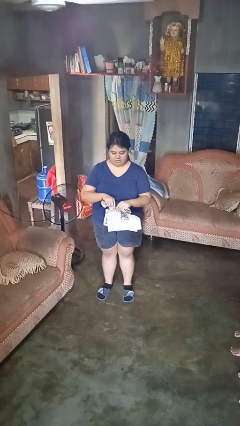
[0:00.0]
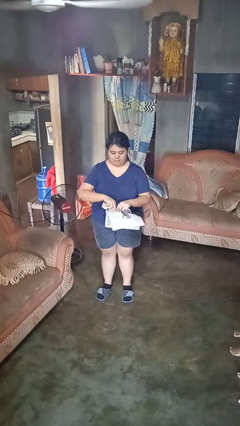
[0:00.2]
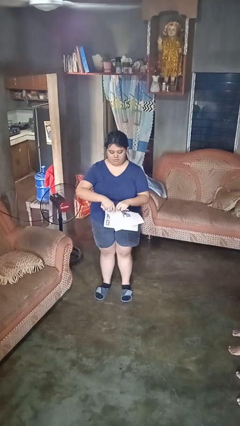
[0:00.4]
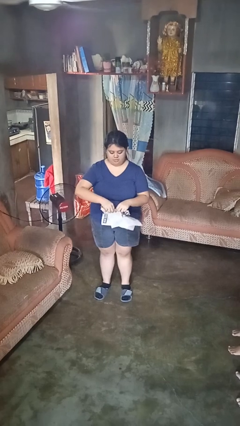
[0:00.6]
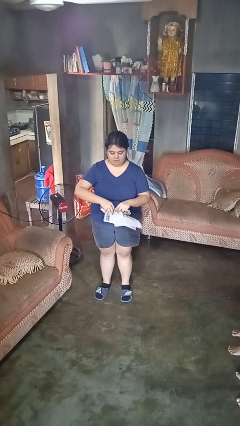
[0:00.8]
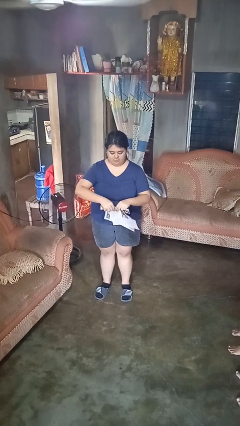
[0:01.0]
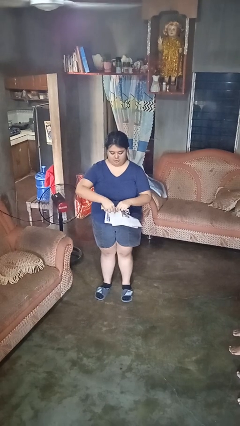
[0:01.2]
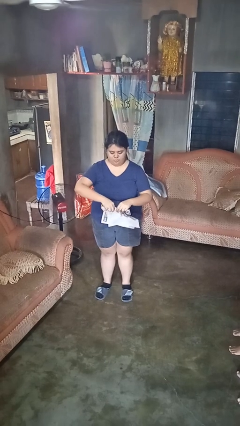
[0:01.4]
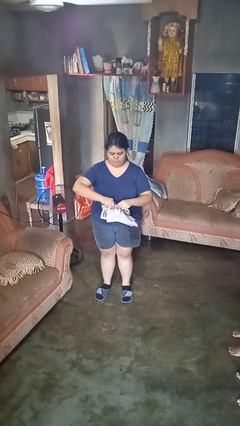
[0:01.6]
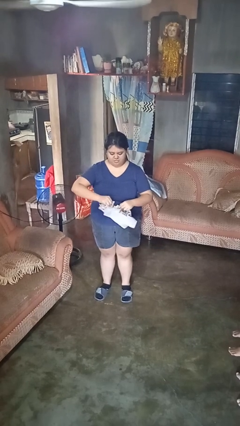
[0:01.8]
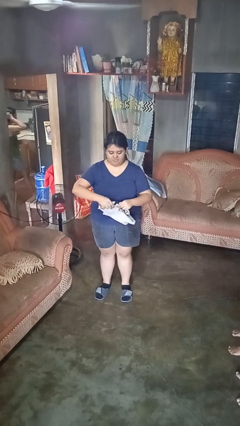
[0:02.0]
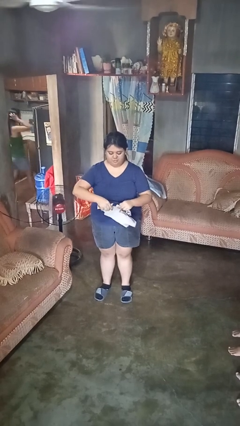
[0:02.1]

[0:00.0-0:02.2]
person tears paper

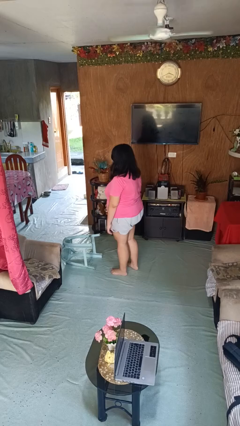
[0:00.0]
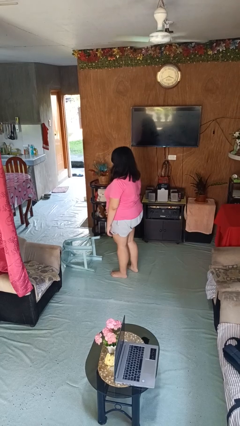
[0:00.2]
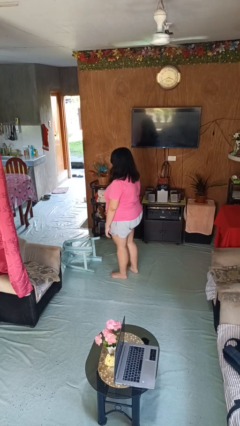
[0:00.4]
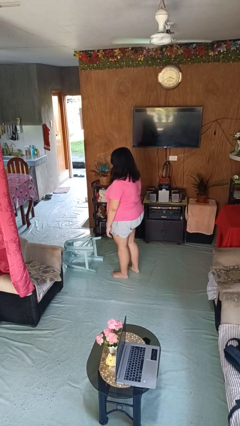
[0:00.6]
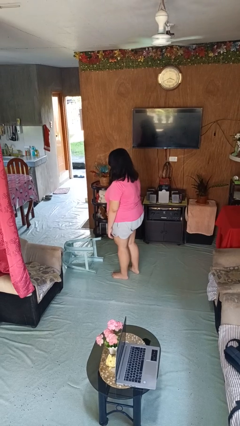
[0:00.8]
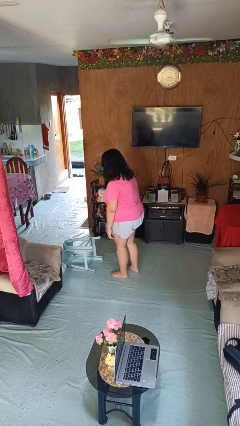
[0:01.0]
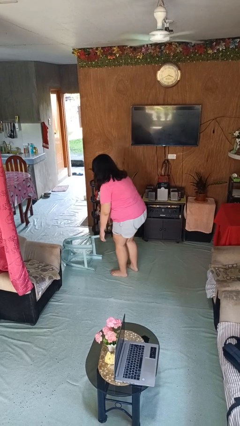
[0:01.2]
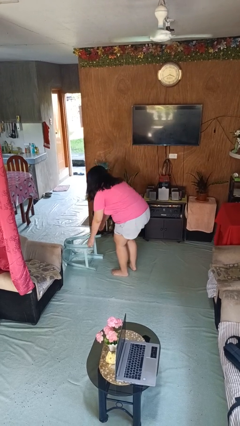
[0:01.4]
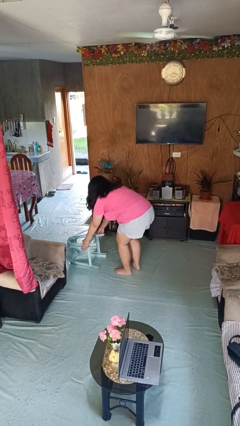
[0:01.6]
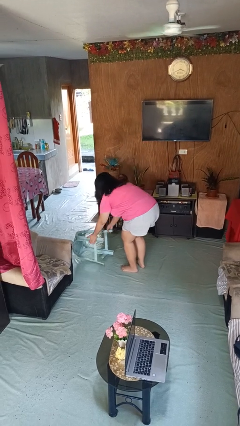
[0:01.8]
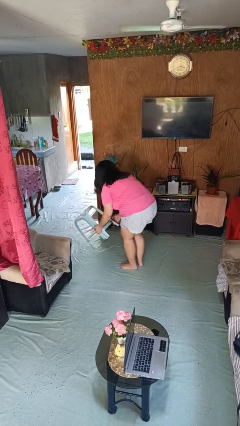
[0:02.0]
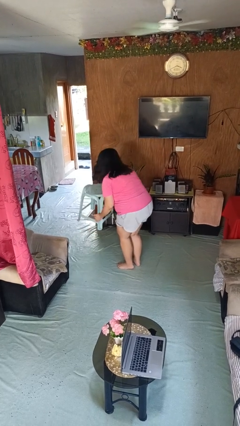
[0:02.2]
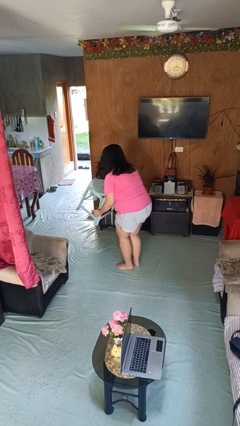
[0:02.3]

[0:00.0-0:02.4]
person sets upright furniture

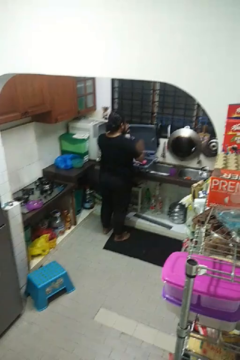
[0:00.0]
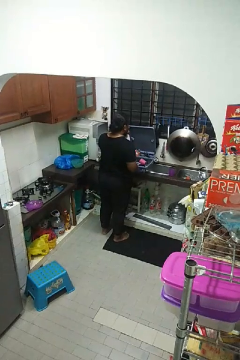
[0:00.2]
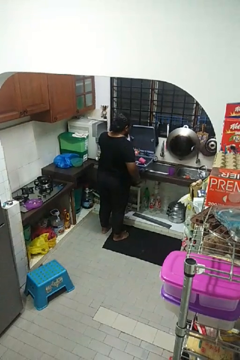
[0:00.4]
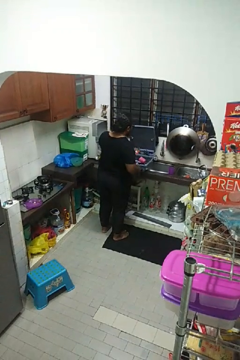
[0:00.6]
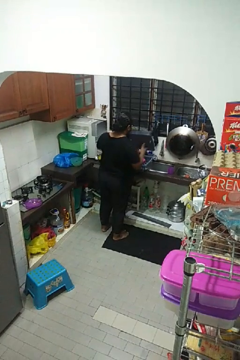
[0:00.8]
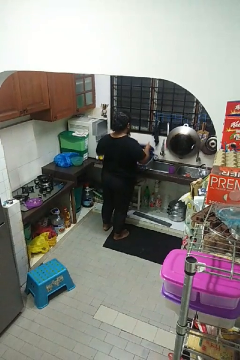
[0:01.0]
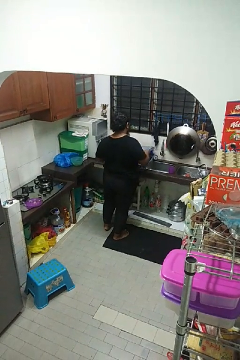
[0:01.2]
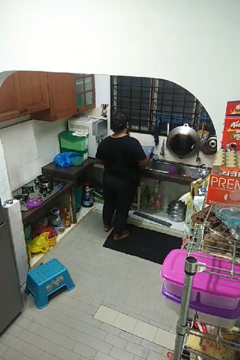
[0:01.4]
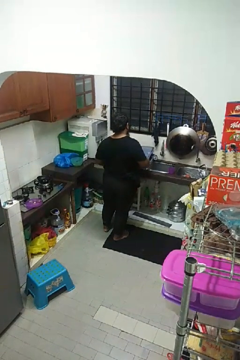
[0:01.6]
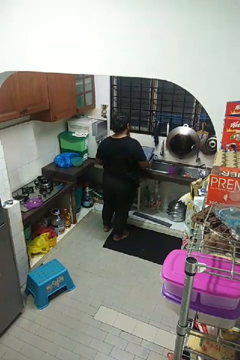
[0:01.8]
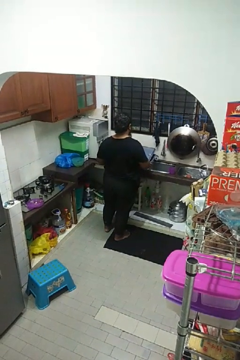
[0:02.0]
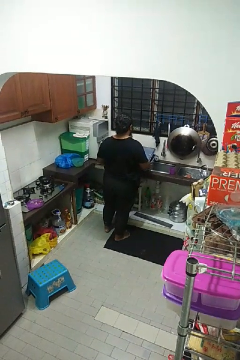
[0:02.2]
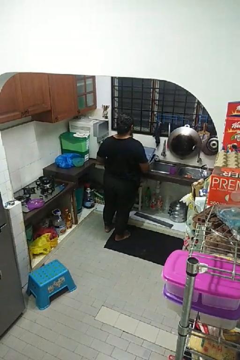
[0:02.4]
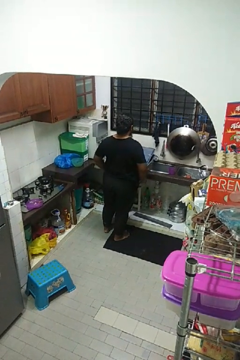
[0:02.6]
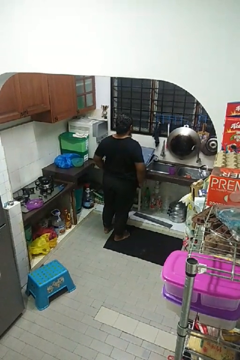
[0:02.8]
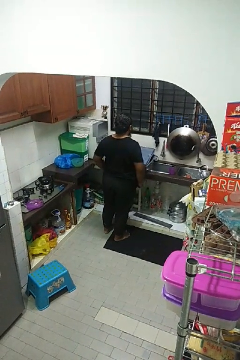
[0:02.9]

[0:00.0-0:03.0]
person closes dishwasher

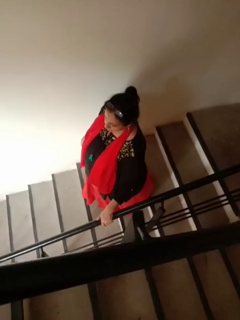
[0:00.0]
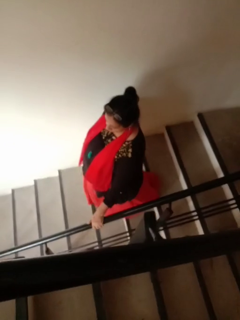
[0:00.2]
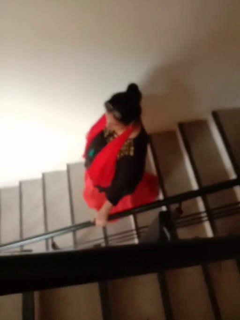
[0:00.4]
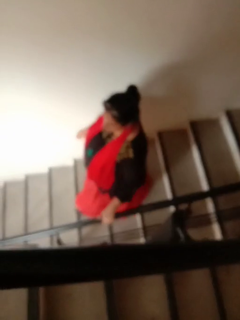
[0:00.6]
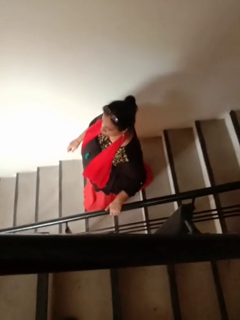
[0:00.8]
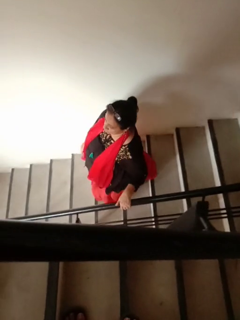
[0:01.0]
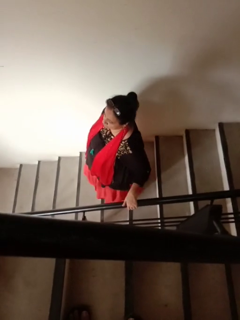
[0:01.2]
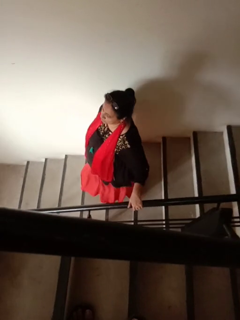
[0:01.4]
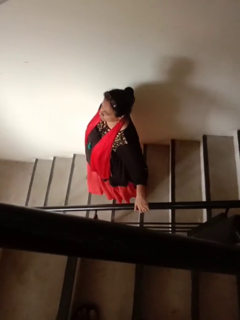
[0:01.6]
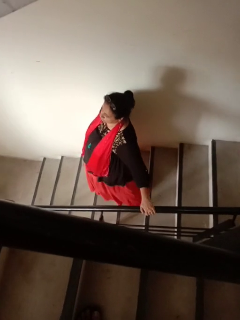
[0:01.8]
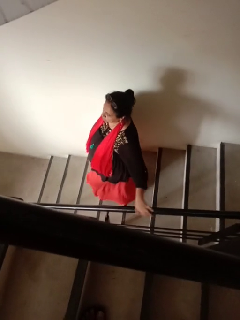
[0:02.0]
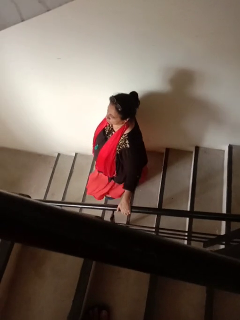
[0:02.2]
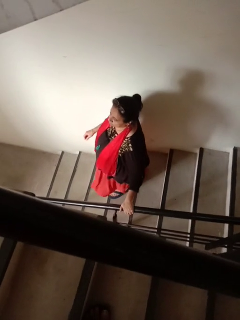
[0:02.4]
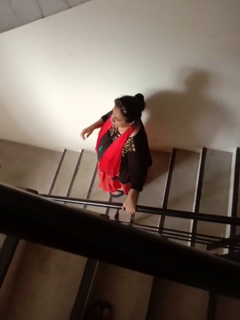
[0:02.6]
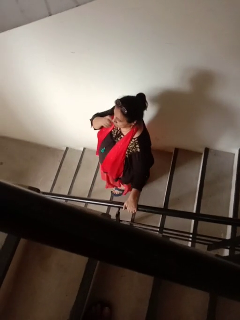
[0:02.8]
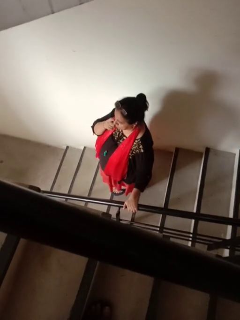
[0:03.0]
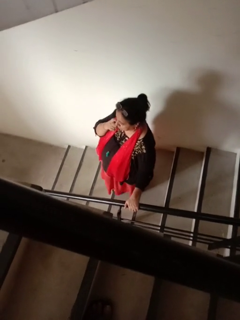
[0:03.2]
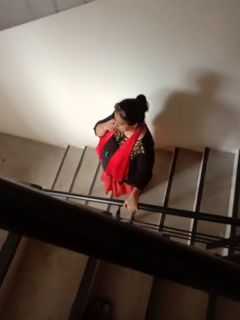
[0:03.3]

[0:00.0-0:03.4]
person climbs down stairs

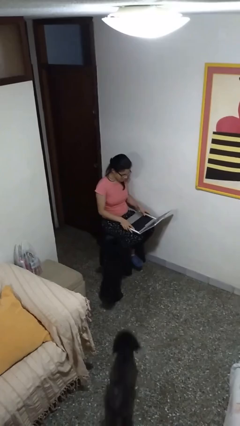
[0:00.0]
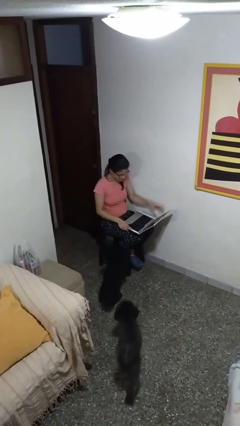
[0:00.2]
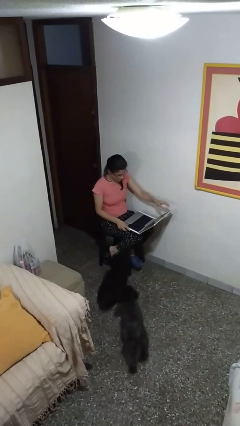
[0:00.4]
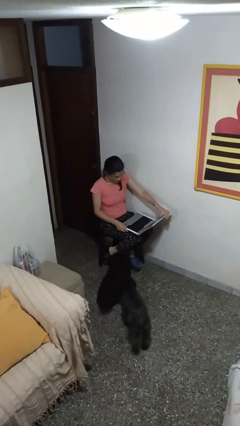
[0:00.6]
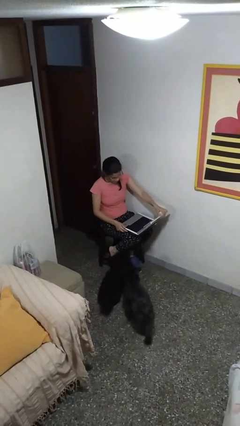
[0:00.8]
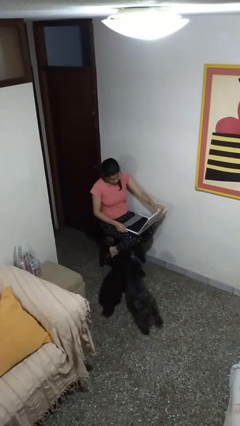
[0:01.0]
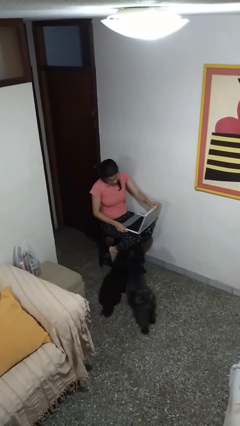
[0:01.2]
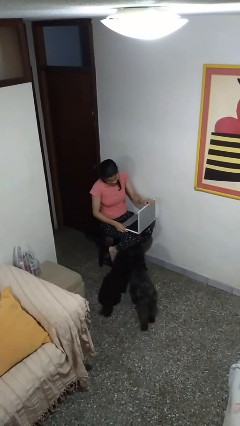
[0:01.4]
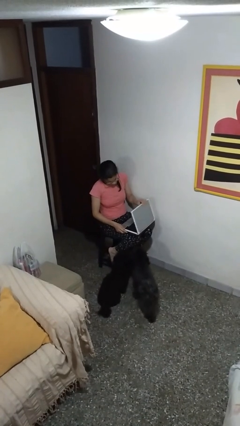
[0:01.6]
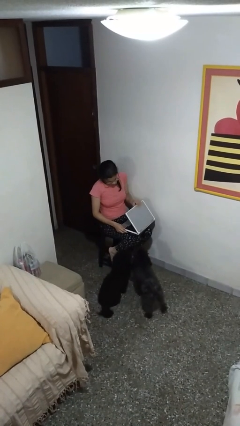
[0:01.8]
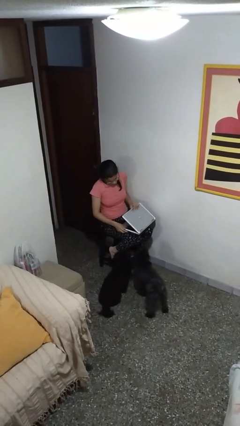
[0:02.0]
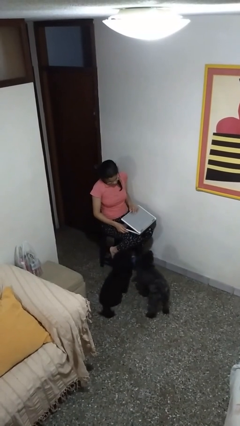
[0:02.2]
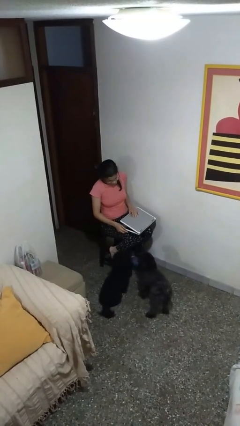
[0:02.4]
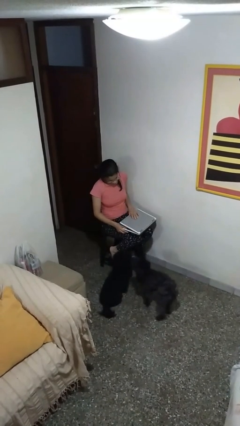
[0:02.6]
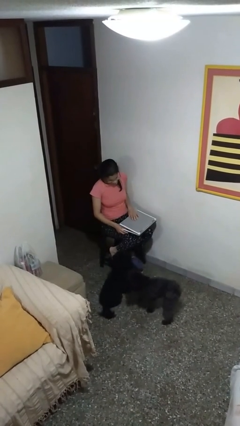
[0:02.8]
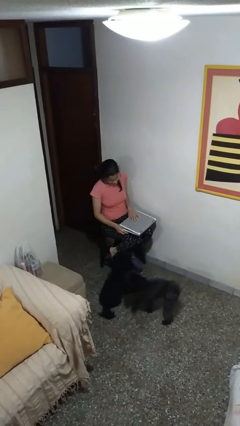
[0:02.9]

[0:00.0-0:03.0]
person closes laptop

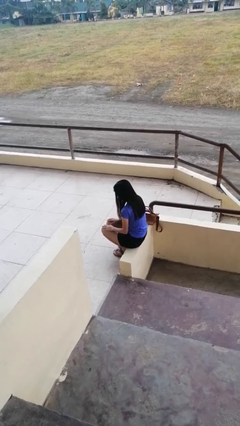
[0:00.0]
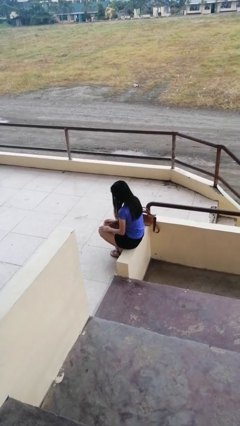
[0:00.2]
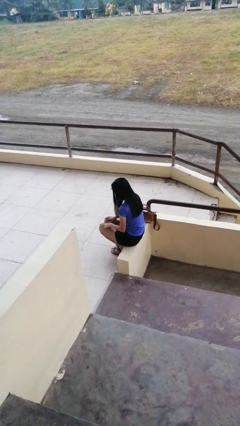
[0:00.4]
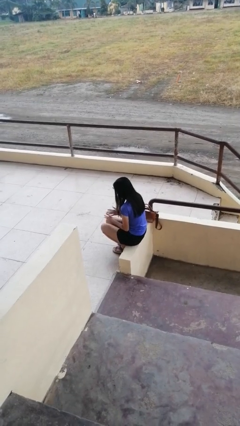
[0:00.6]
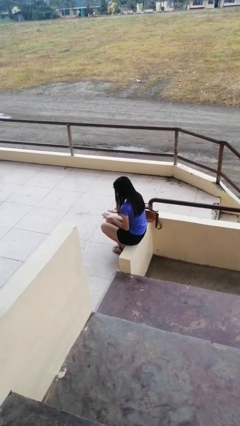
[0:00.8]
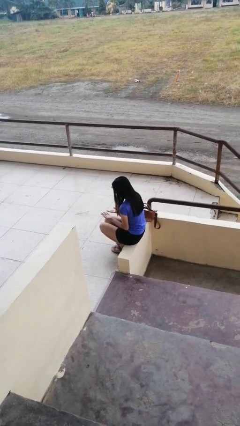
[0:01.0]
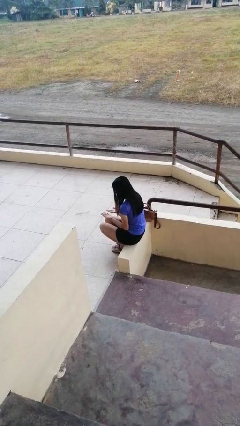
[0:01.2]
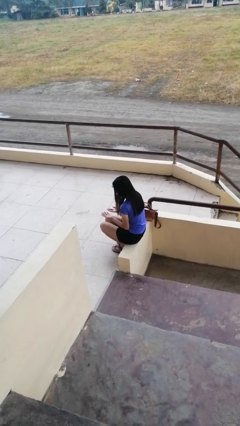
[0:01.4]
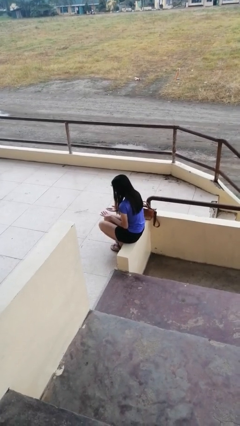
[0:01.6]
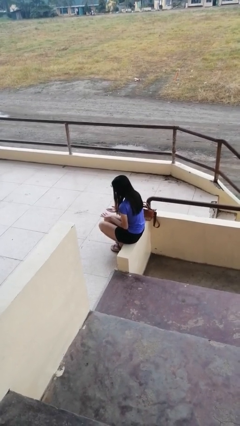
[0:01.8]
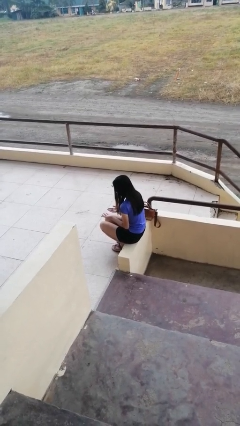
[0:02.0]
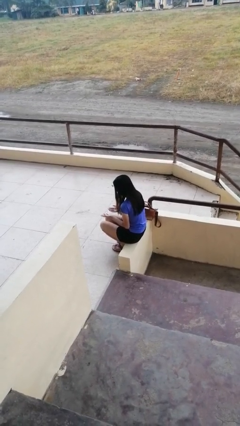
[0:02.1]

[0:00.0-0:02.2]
person looks at hands in lap

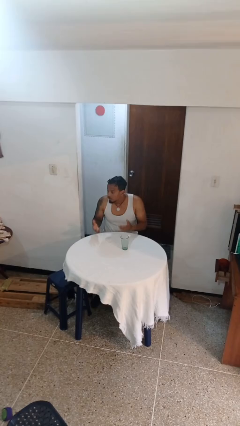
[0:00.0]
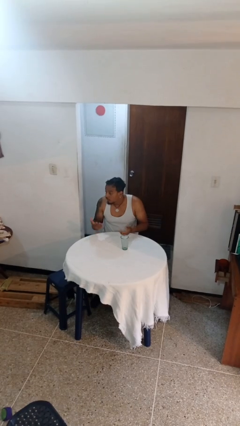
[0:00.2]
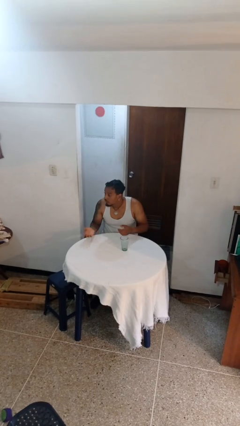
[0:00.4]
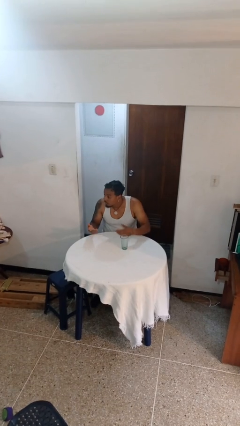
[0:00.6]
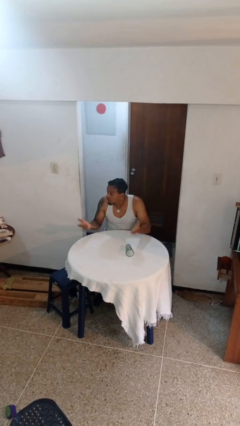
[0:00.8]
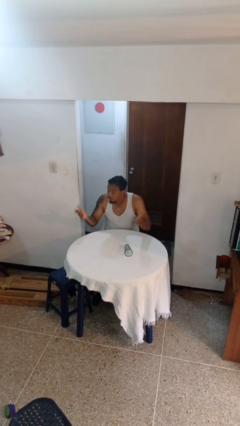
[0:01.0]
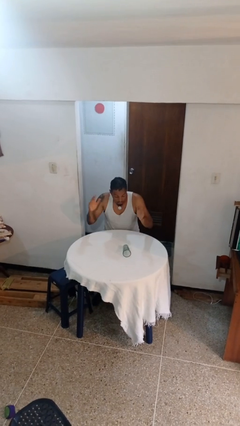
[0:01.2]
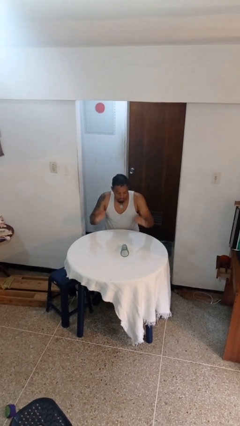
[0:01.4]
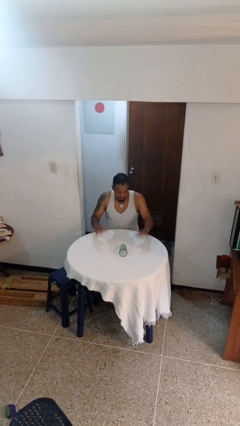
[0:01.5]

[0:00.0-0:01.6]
person knocks over glass

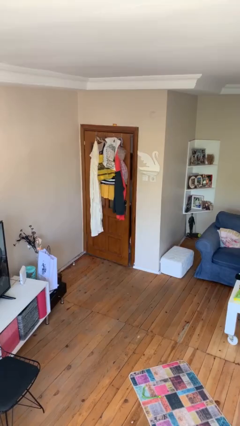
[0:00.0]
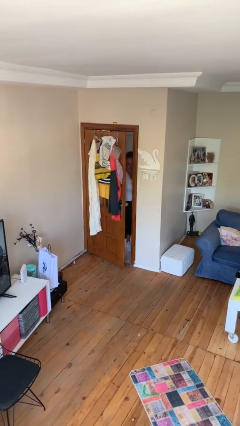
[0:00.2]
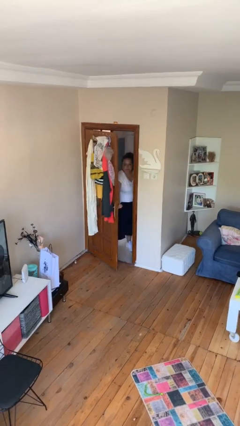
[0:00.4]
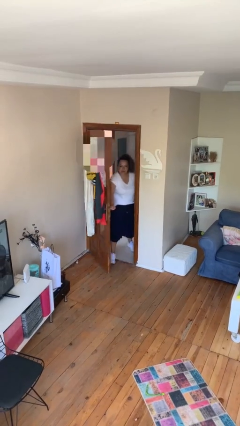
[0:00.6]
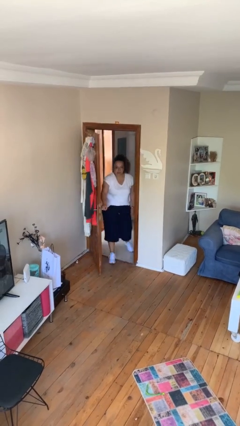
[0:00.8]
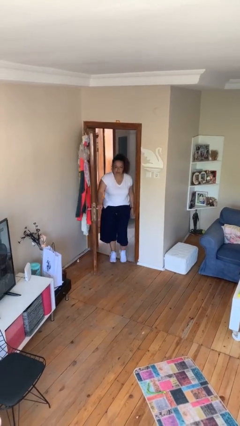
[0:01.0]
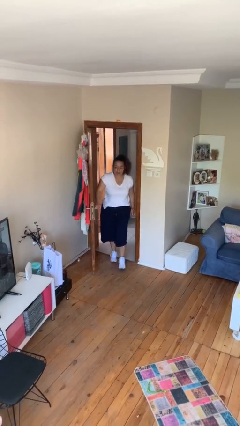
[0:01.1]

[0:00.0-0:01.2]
person opens facility door
